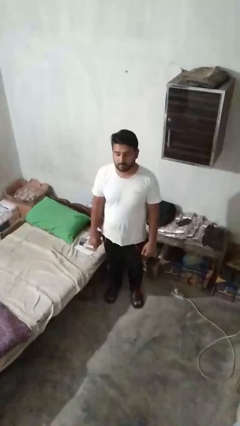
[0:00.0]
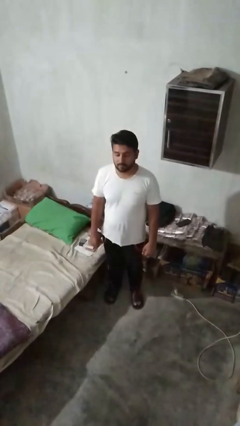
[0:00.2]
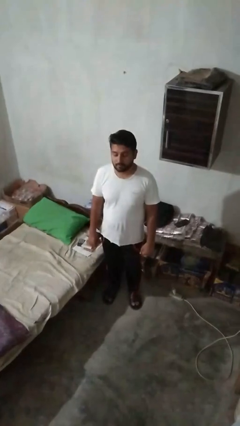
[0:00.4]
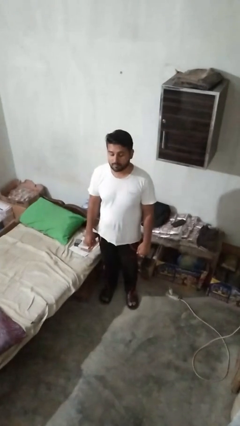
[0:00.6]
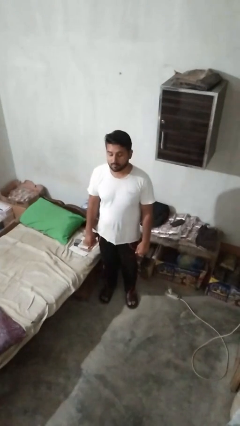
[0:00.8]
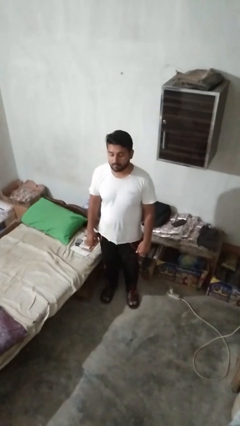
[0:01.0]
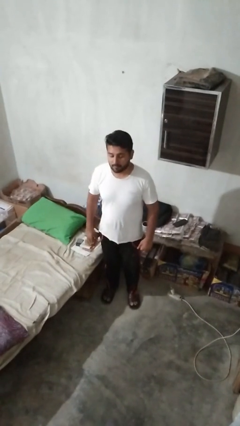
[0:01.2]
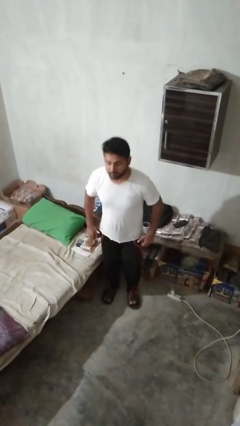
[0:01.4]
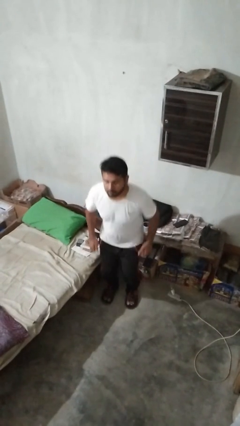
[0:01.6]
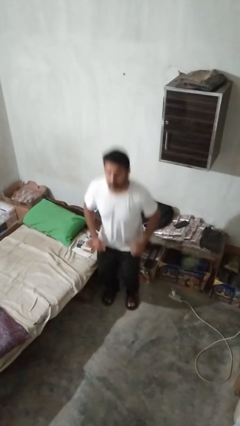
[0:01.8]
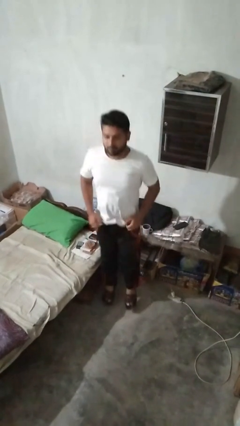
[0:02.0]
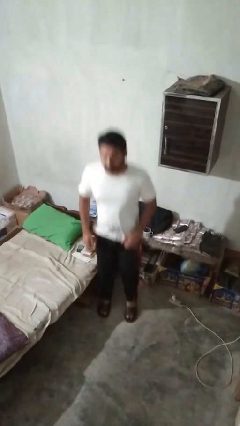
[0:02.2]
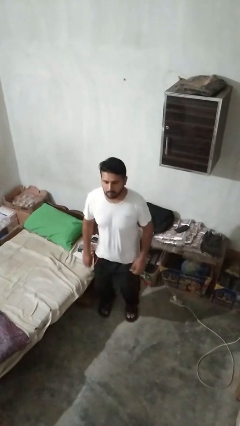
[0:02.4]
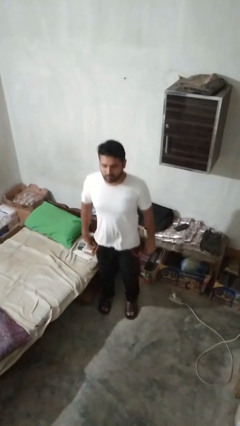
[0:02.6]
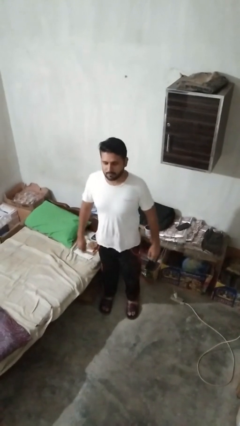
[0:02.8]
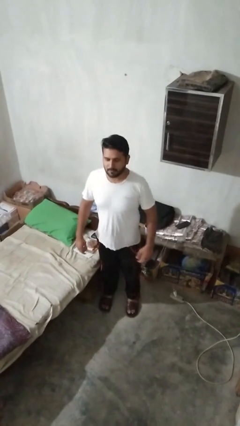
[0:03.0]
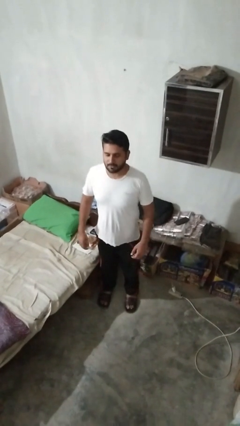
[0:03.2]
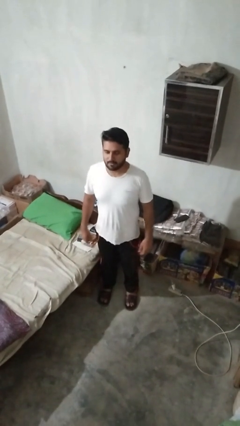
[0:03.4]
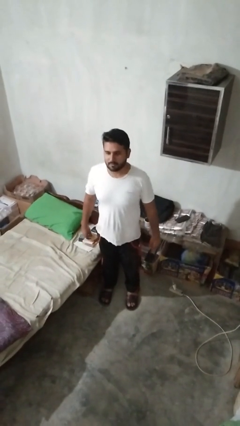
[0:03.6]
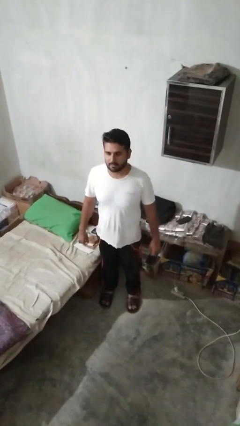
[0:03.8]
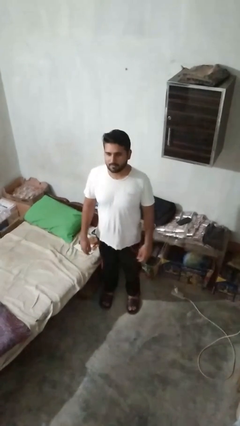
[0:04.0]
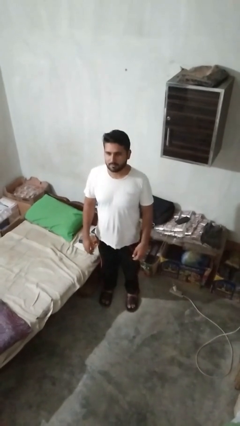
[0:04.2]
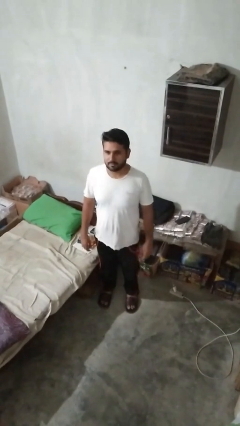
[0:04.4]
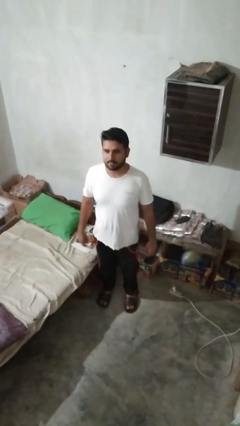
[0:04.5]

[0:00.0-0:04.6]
person jumps

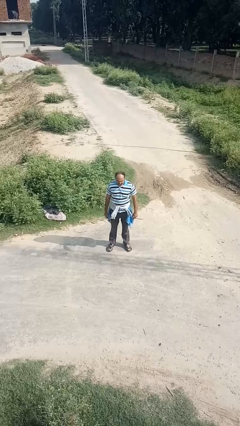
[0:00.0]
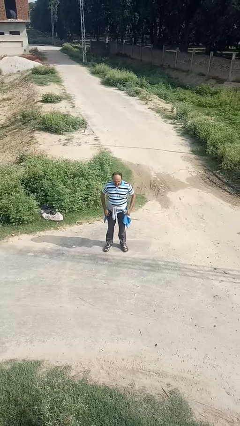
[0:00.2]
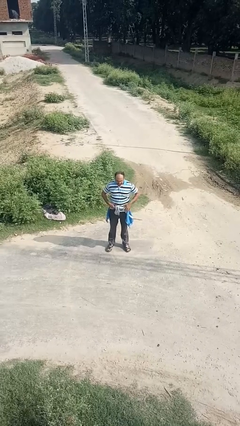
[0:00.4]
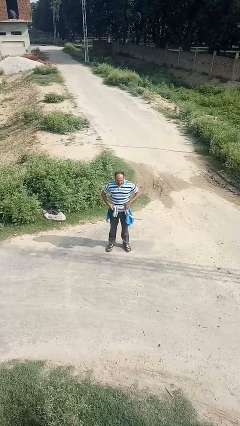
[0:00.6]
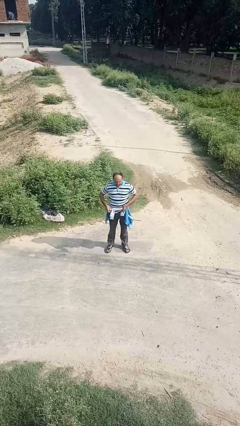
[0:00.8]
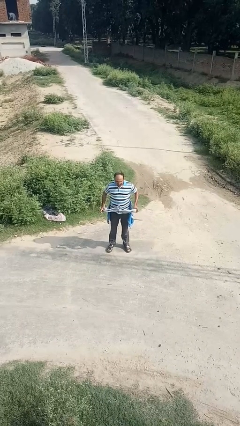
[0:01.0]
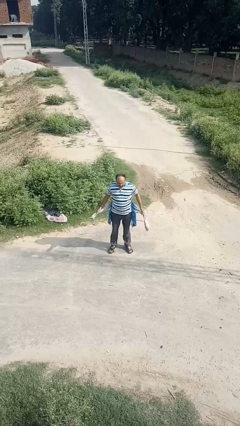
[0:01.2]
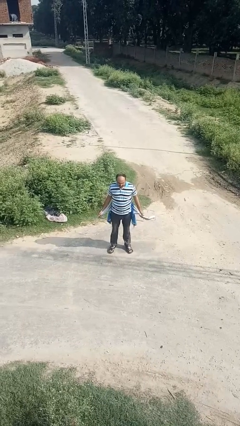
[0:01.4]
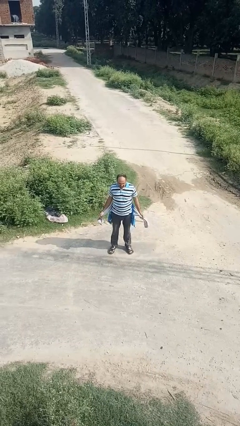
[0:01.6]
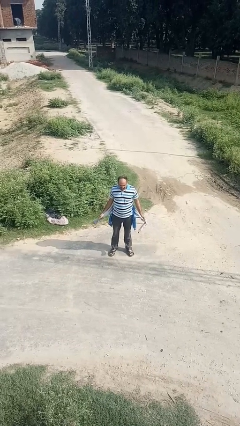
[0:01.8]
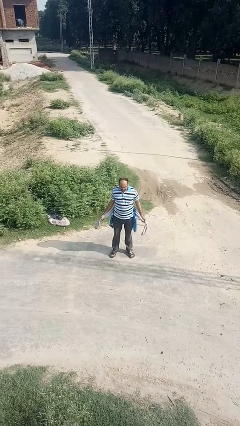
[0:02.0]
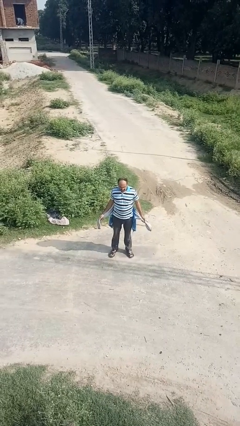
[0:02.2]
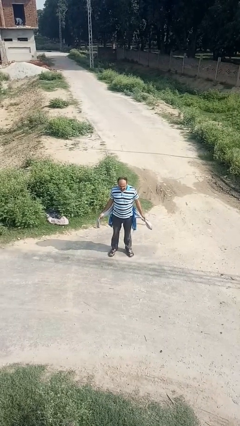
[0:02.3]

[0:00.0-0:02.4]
person unties jacket around waist

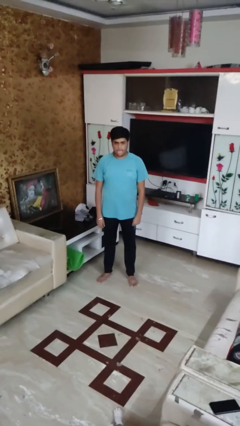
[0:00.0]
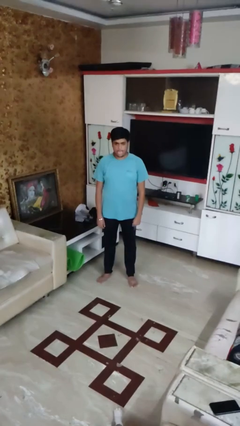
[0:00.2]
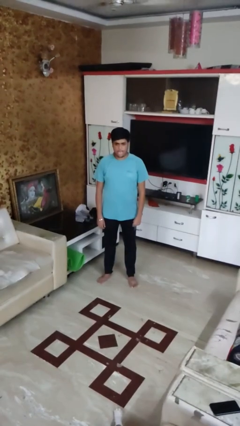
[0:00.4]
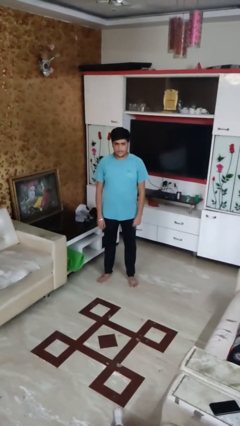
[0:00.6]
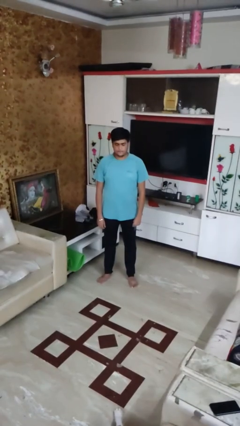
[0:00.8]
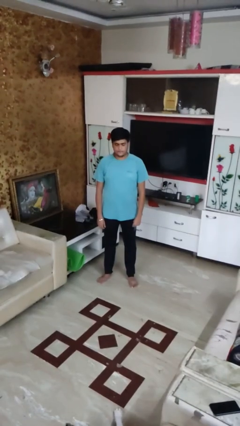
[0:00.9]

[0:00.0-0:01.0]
person sticks out tongue

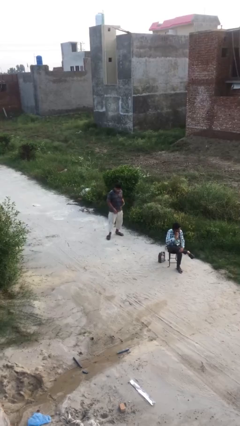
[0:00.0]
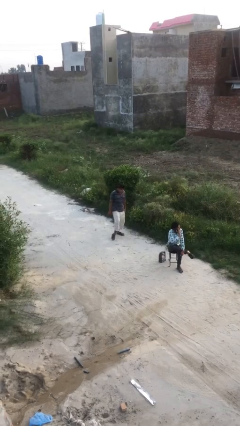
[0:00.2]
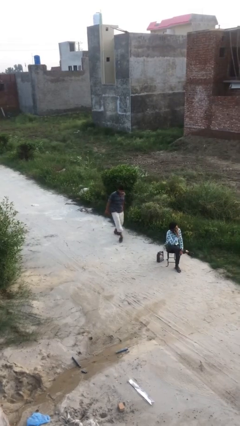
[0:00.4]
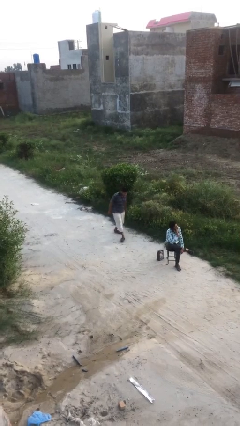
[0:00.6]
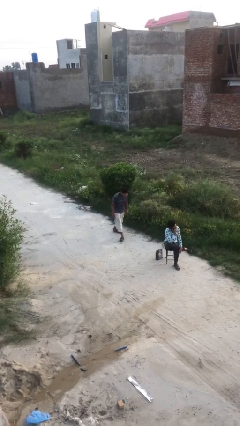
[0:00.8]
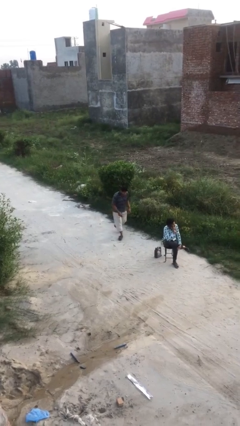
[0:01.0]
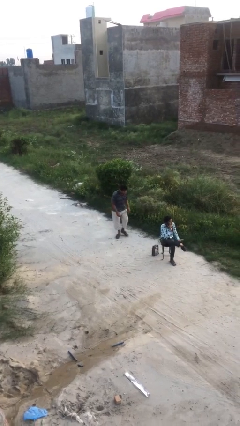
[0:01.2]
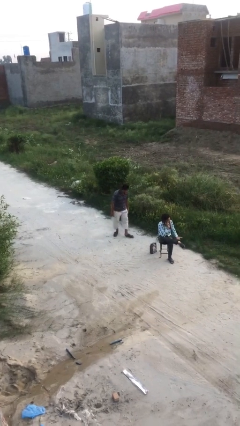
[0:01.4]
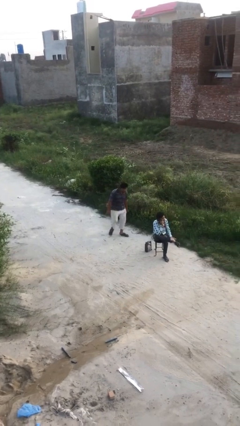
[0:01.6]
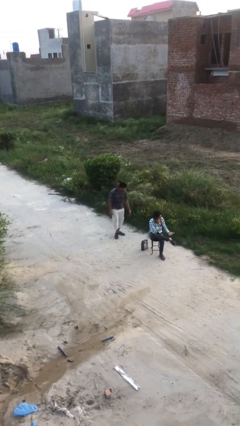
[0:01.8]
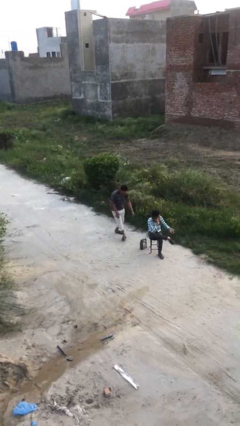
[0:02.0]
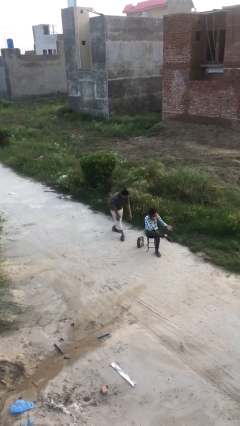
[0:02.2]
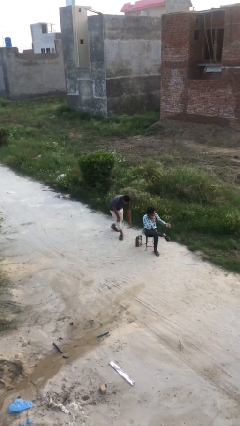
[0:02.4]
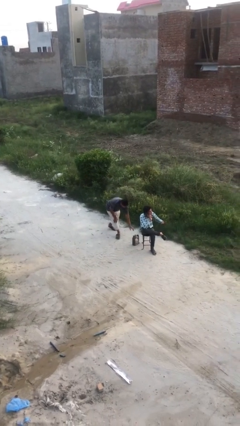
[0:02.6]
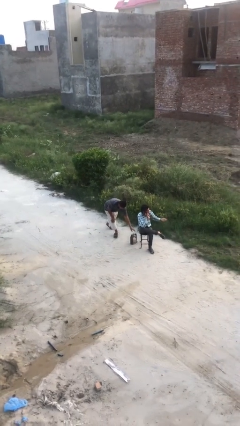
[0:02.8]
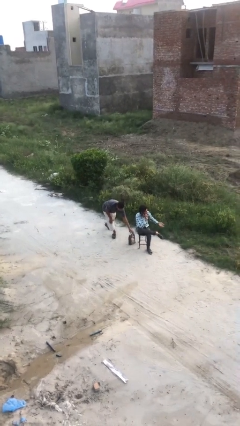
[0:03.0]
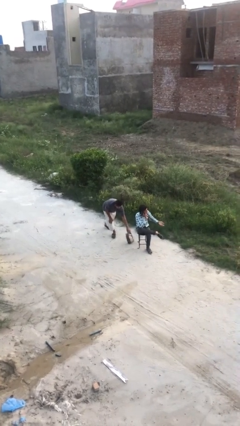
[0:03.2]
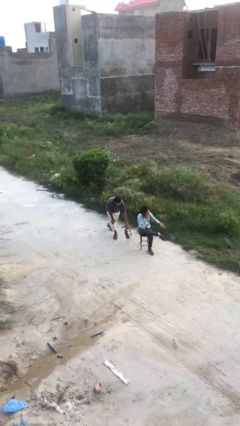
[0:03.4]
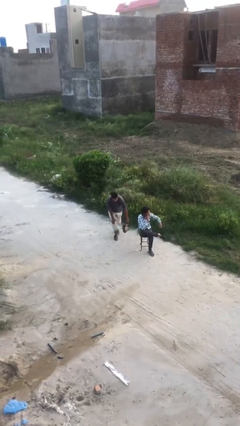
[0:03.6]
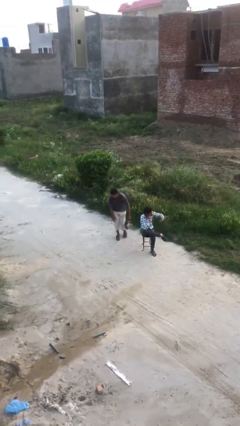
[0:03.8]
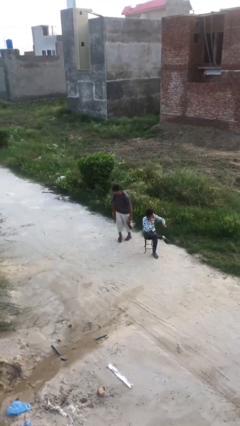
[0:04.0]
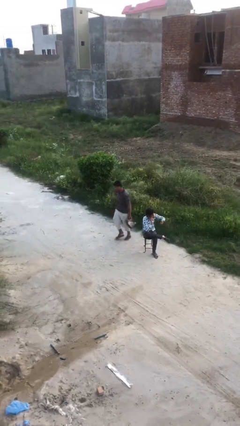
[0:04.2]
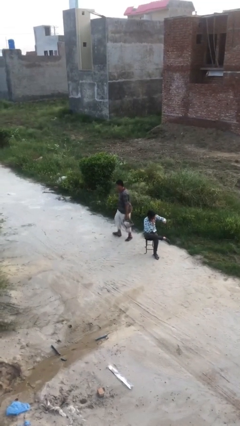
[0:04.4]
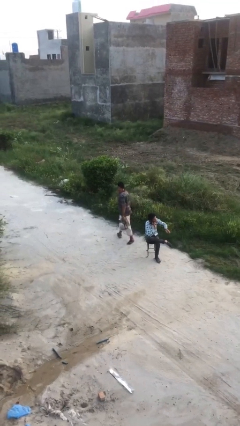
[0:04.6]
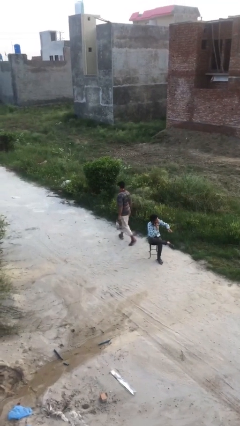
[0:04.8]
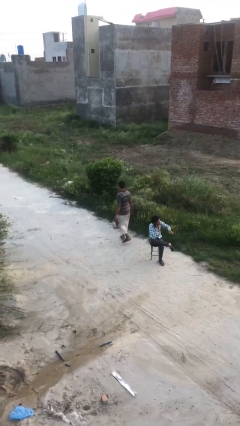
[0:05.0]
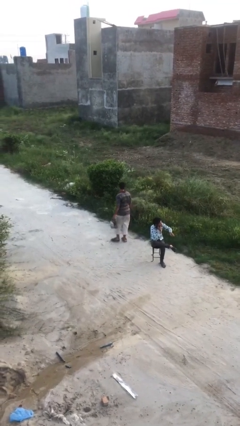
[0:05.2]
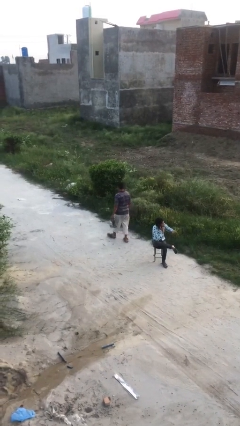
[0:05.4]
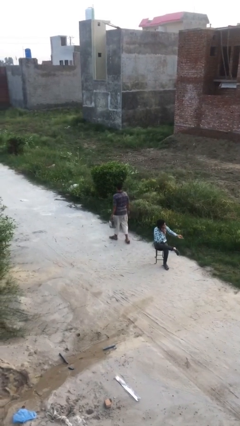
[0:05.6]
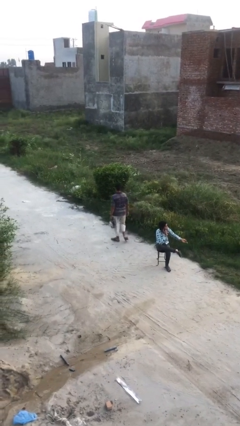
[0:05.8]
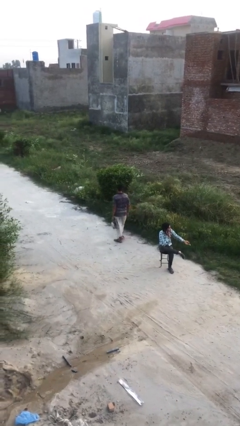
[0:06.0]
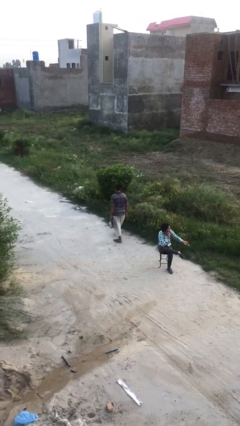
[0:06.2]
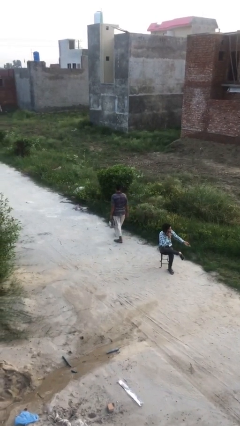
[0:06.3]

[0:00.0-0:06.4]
person steals object from person

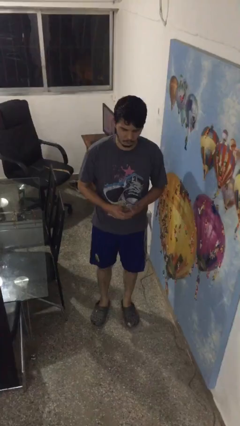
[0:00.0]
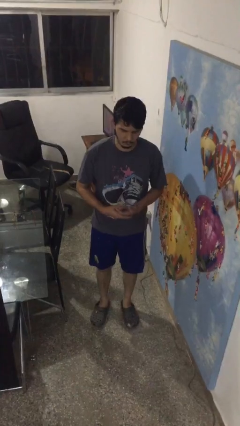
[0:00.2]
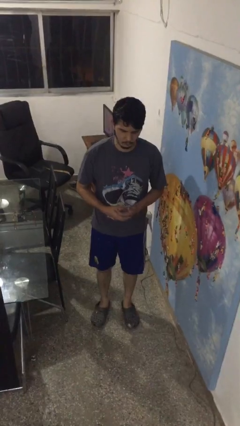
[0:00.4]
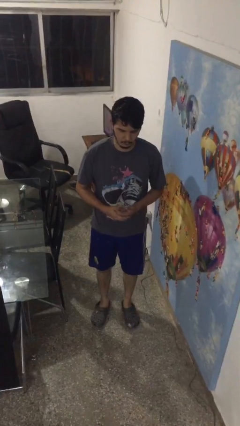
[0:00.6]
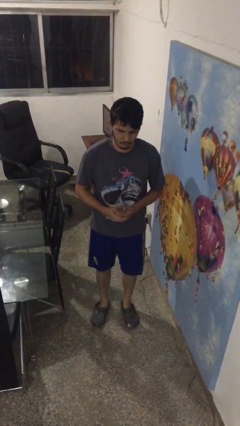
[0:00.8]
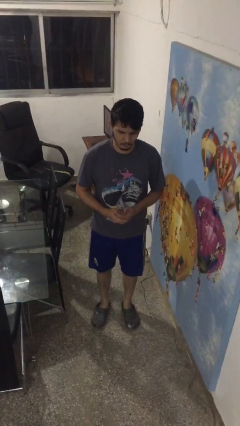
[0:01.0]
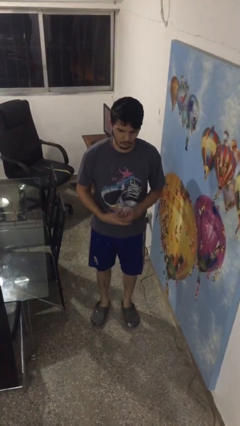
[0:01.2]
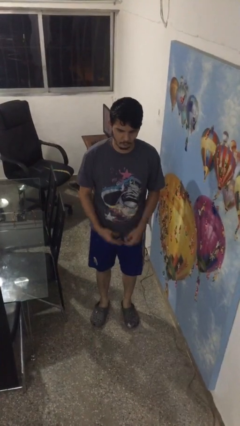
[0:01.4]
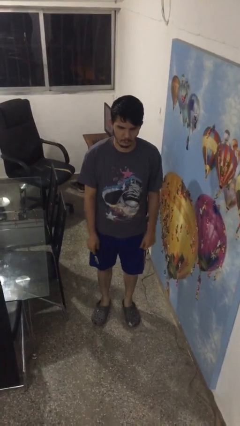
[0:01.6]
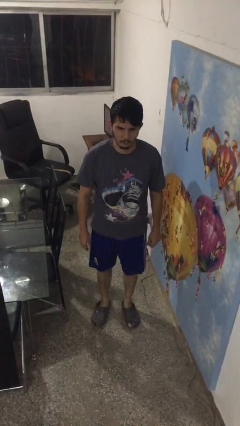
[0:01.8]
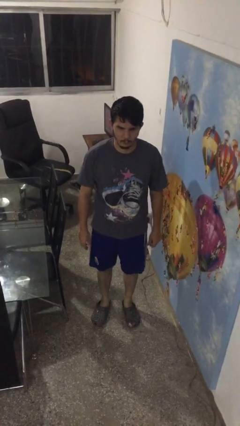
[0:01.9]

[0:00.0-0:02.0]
person cracks knuckles

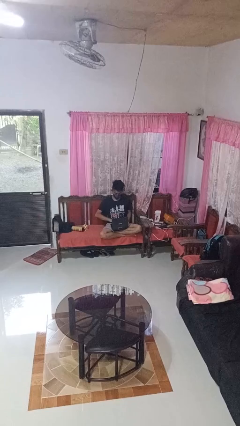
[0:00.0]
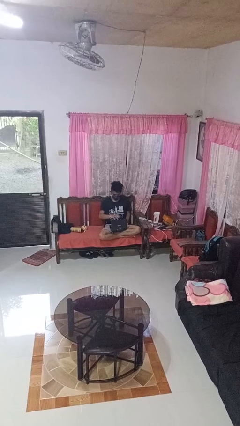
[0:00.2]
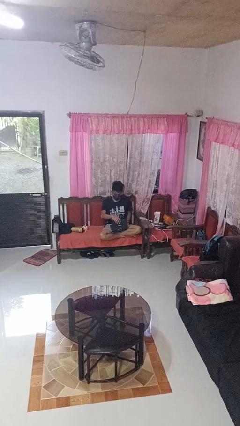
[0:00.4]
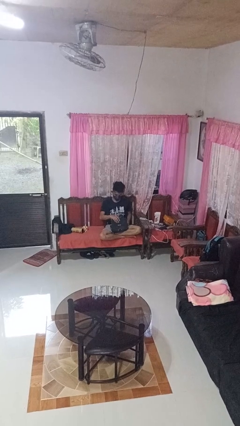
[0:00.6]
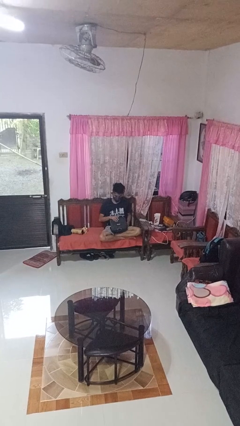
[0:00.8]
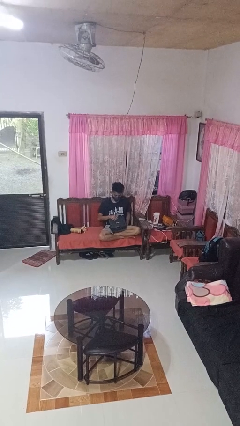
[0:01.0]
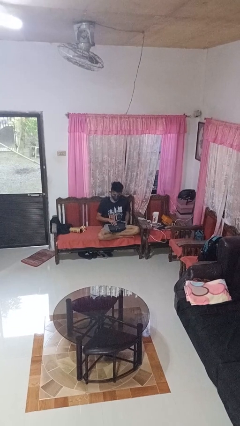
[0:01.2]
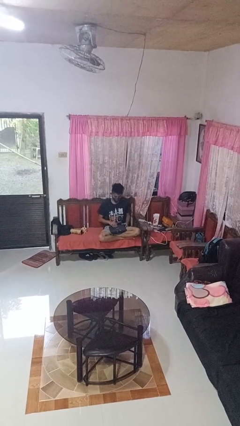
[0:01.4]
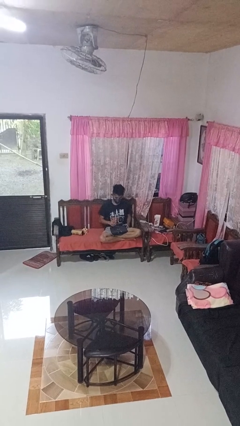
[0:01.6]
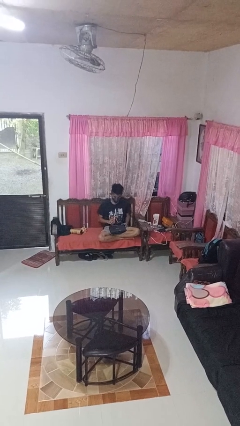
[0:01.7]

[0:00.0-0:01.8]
person closes laptop
